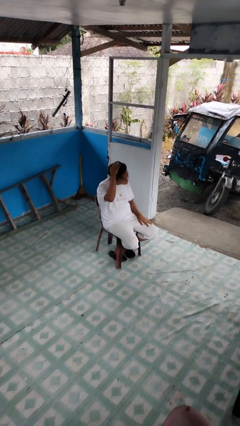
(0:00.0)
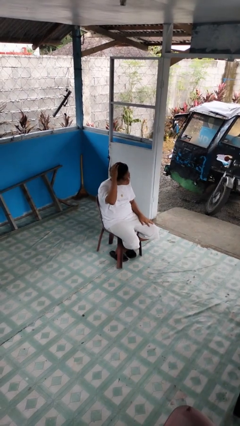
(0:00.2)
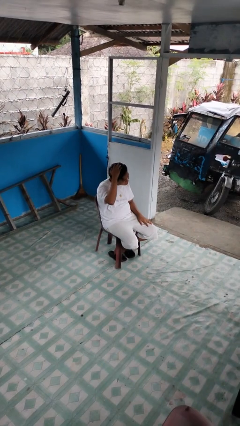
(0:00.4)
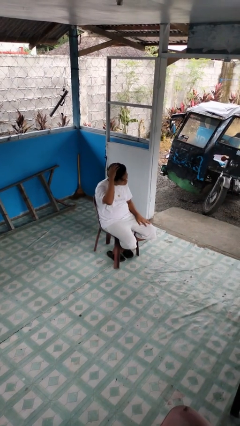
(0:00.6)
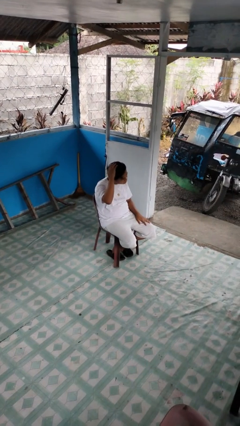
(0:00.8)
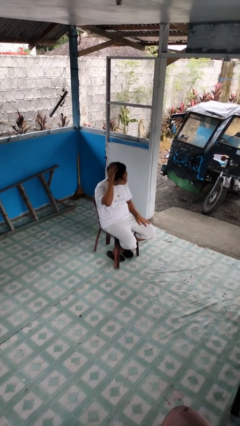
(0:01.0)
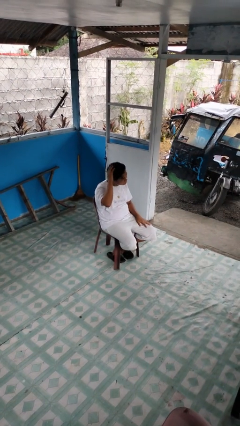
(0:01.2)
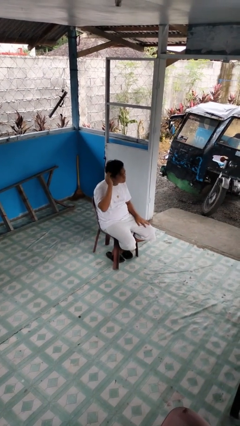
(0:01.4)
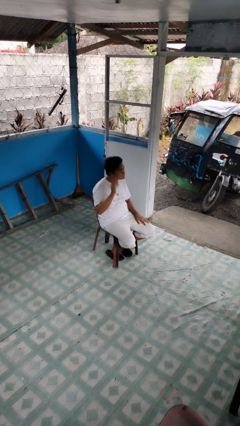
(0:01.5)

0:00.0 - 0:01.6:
person pats head

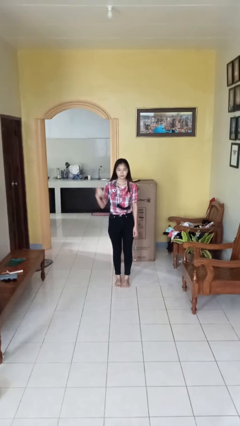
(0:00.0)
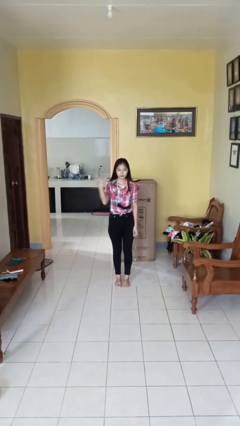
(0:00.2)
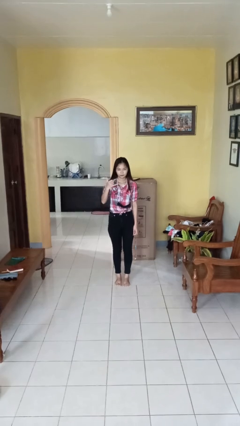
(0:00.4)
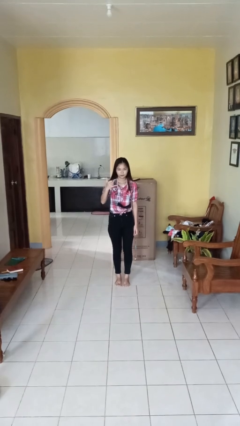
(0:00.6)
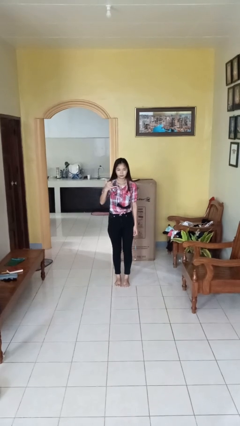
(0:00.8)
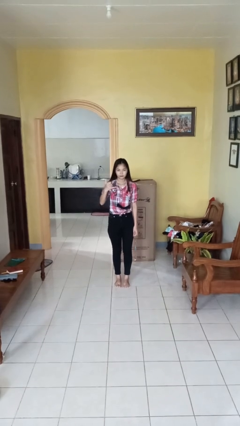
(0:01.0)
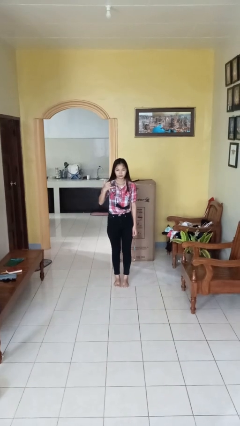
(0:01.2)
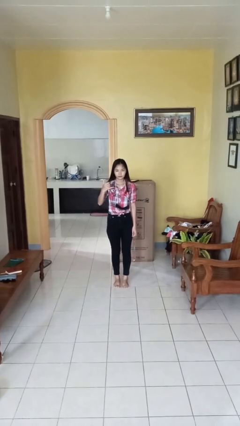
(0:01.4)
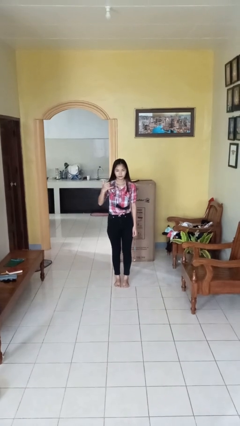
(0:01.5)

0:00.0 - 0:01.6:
person gestures hang loose

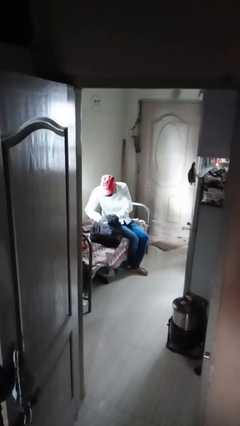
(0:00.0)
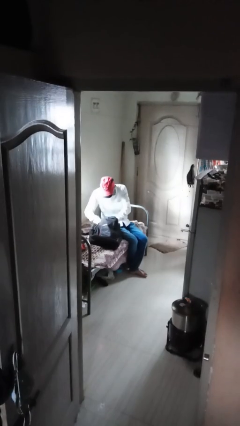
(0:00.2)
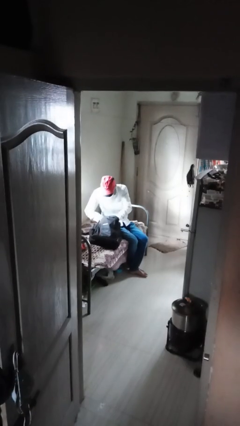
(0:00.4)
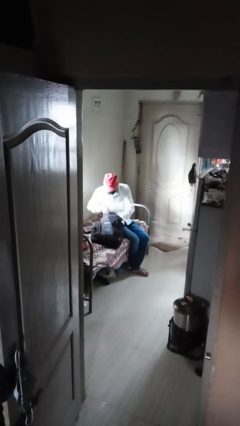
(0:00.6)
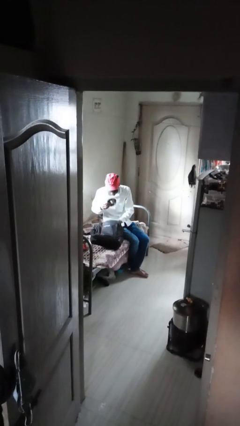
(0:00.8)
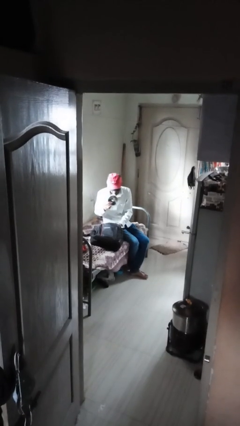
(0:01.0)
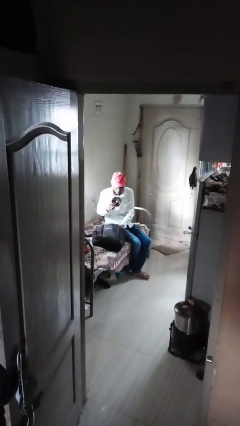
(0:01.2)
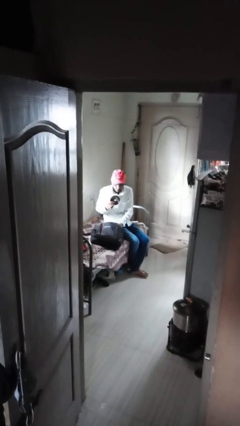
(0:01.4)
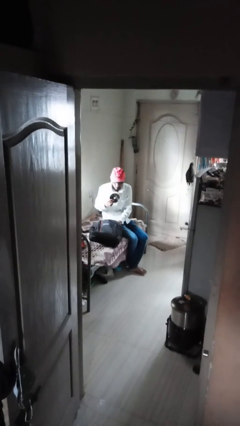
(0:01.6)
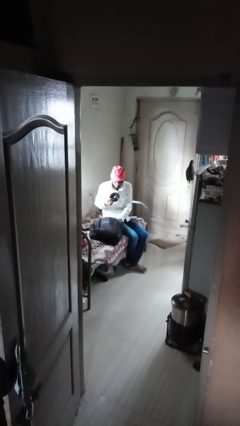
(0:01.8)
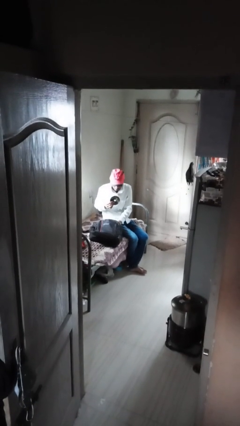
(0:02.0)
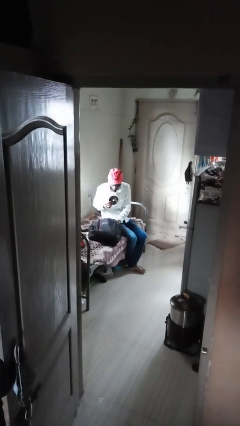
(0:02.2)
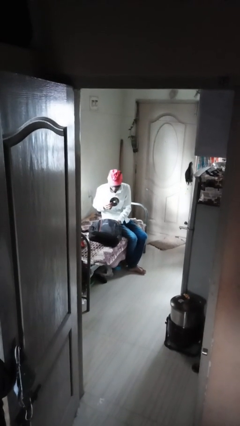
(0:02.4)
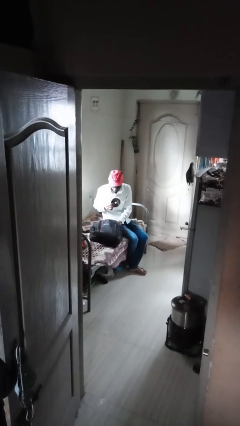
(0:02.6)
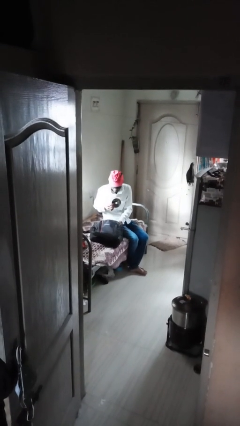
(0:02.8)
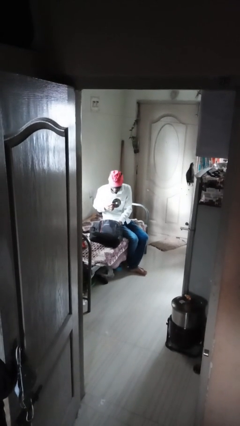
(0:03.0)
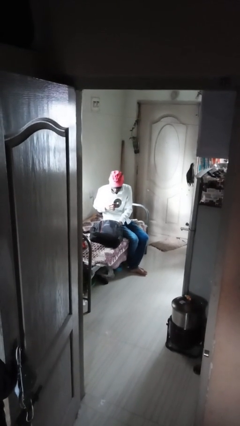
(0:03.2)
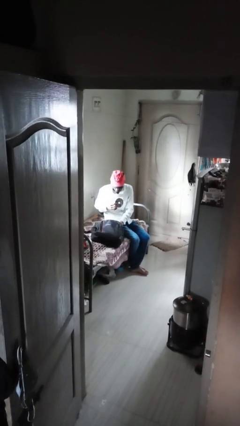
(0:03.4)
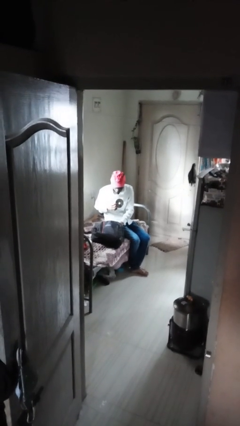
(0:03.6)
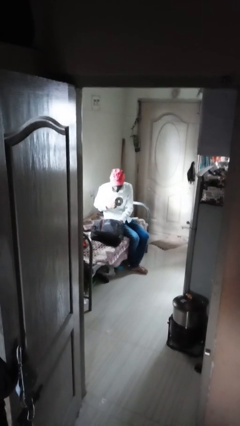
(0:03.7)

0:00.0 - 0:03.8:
person takes object from backpack

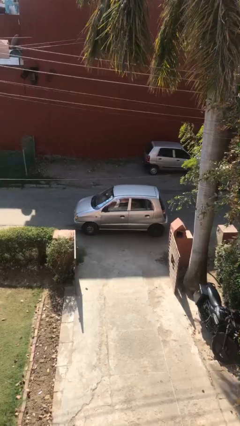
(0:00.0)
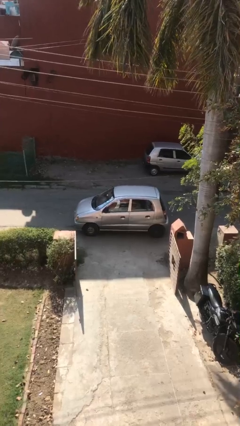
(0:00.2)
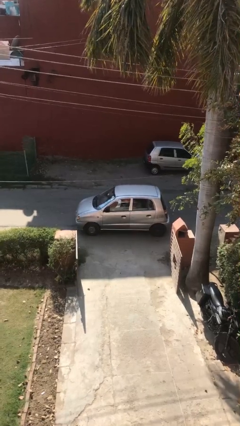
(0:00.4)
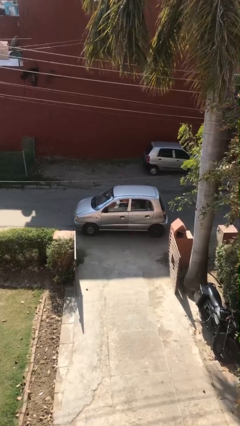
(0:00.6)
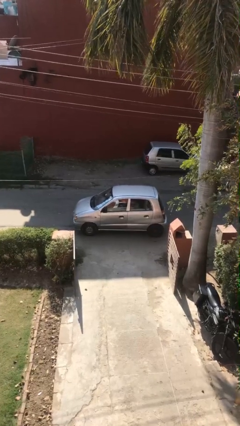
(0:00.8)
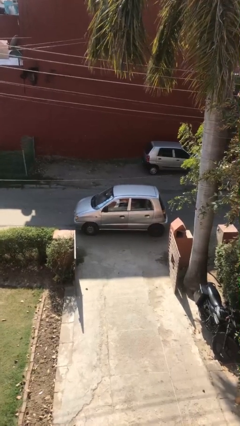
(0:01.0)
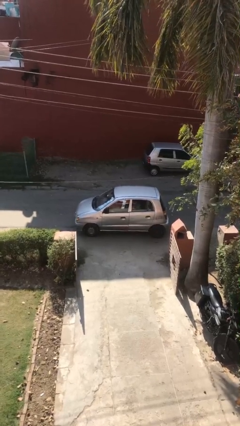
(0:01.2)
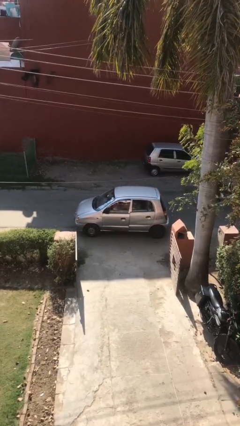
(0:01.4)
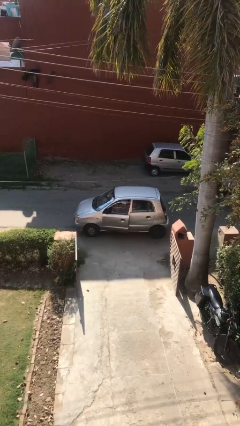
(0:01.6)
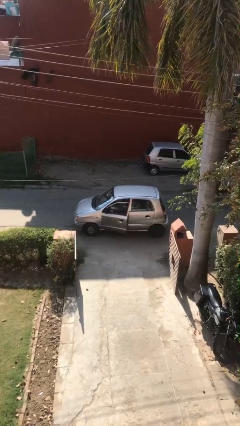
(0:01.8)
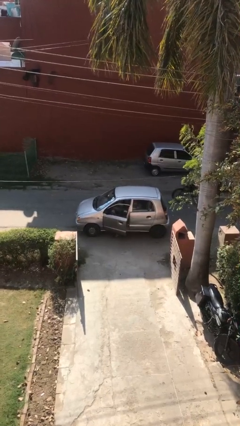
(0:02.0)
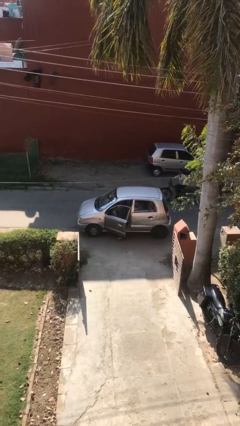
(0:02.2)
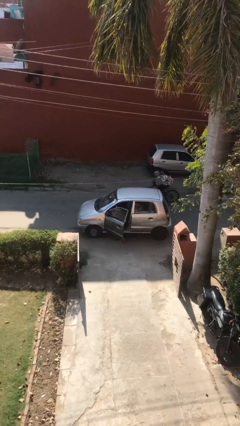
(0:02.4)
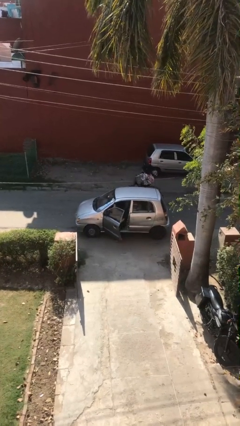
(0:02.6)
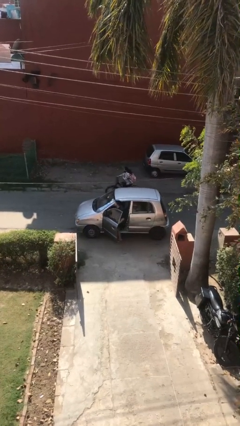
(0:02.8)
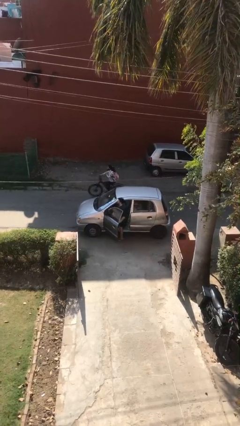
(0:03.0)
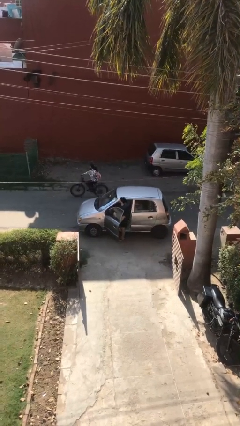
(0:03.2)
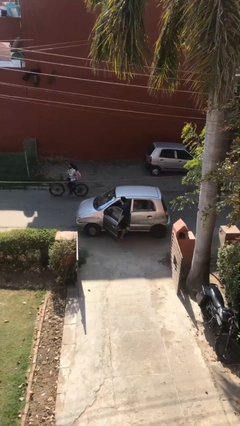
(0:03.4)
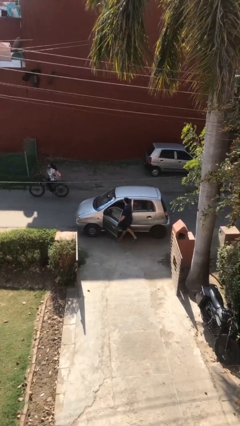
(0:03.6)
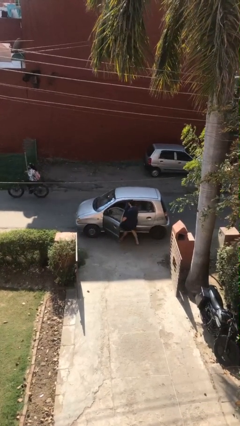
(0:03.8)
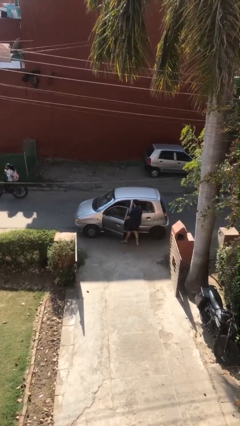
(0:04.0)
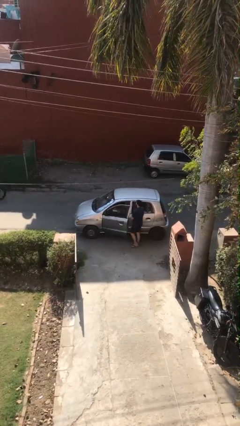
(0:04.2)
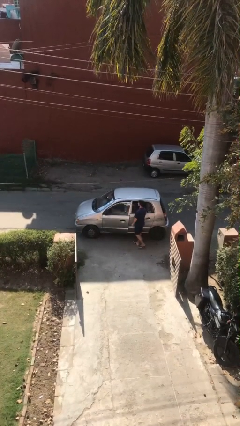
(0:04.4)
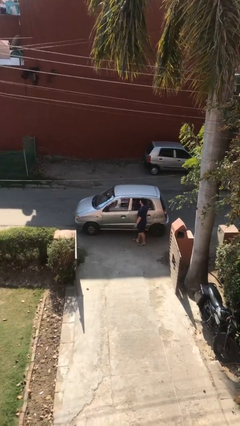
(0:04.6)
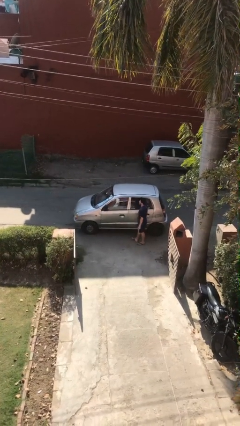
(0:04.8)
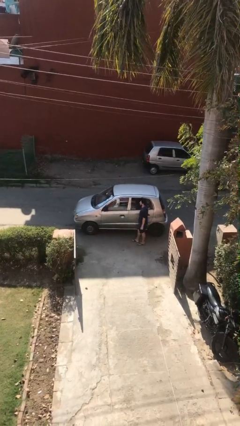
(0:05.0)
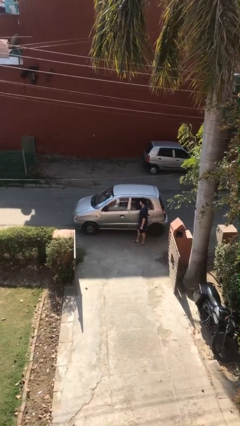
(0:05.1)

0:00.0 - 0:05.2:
car drops off person

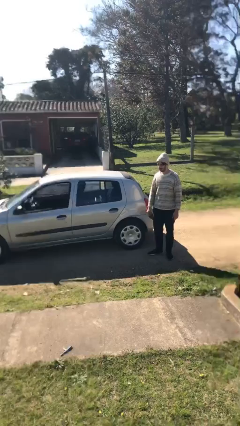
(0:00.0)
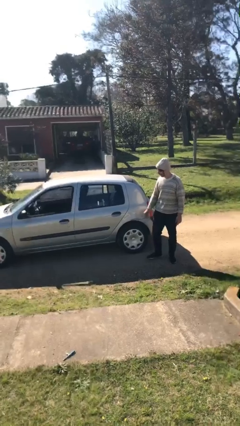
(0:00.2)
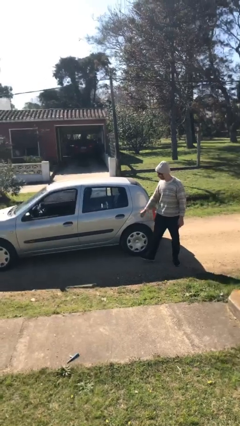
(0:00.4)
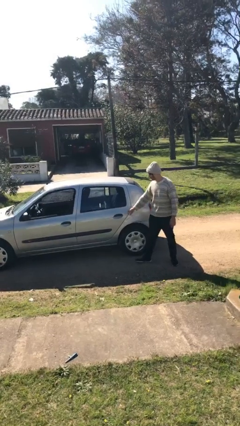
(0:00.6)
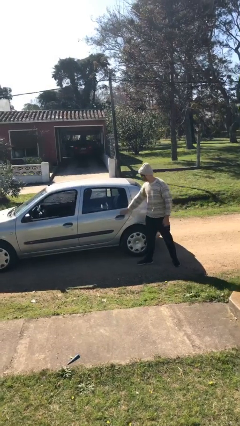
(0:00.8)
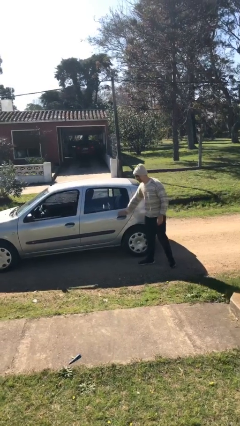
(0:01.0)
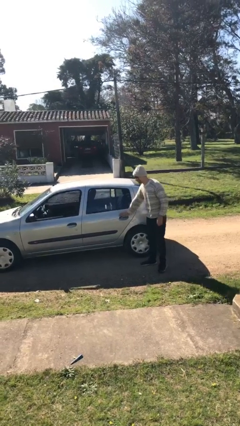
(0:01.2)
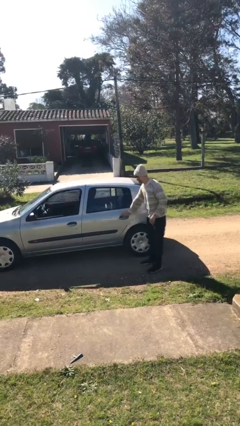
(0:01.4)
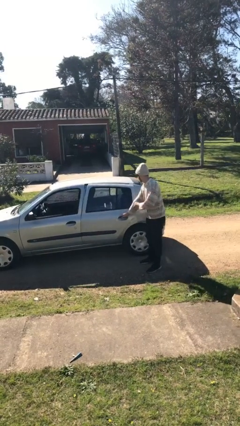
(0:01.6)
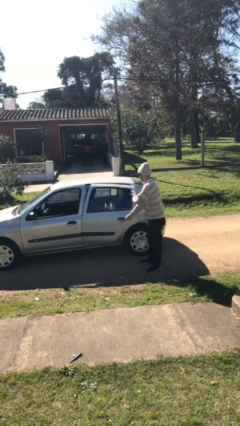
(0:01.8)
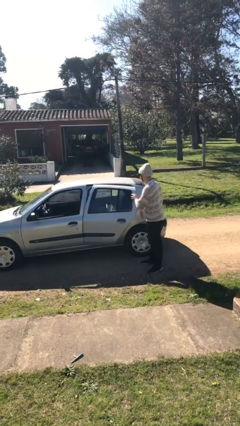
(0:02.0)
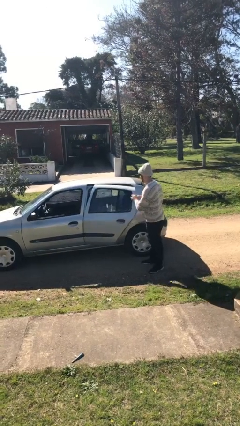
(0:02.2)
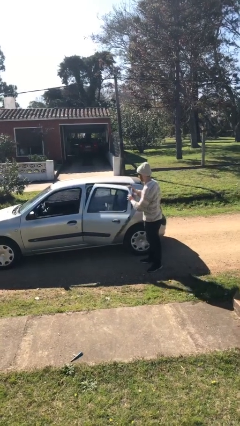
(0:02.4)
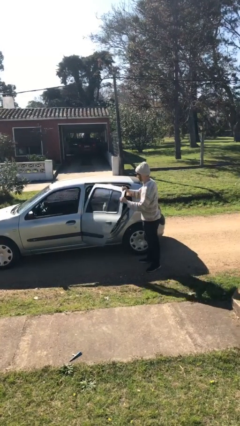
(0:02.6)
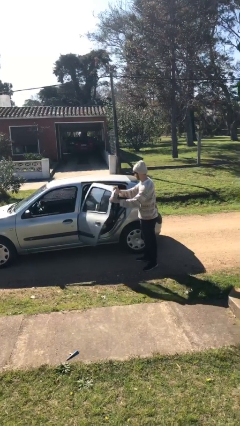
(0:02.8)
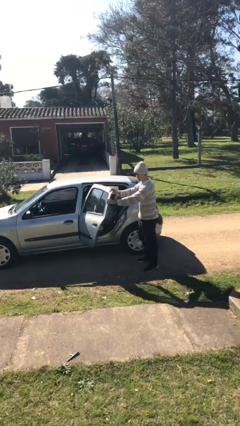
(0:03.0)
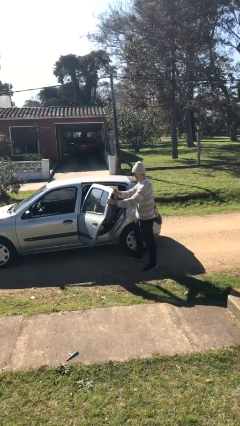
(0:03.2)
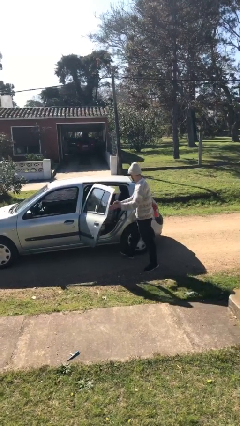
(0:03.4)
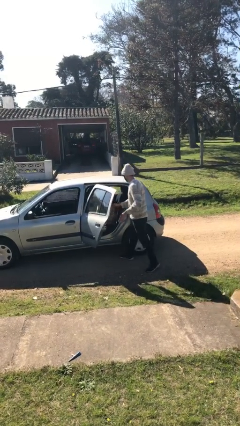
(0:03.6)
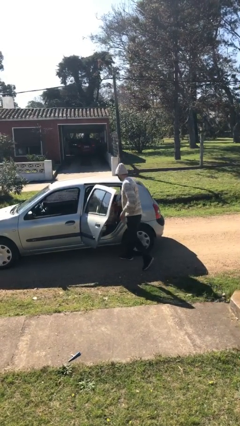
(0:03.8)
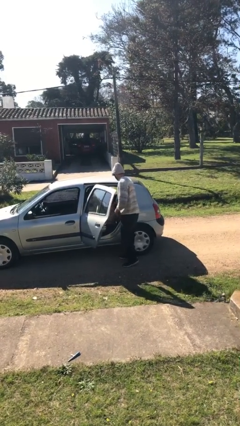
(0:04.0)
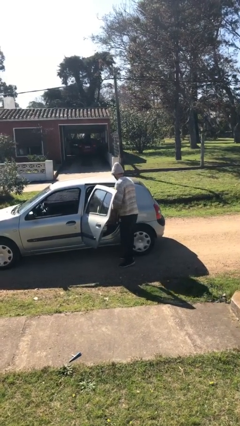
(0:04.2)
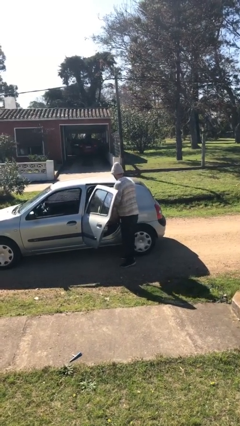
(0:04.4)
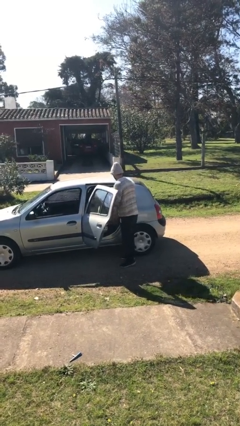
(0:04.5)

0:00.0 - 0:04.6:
person opens car door

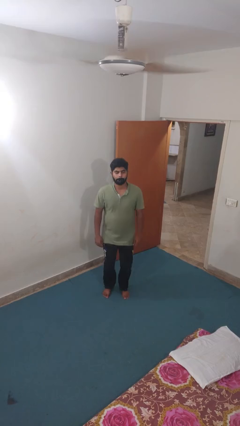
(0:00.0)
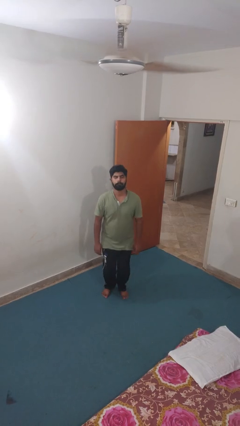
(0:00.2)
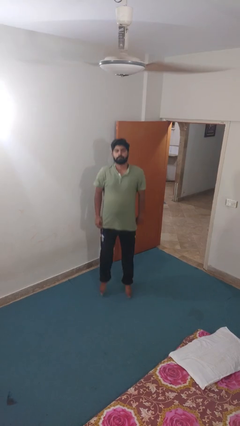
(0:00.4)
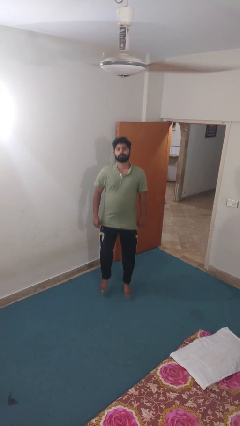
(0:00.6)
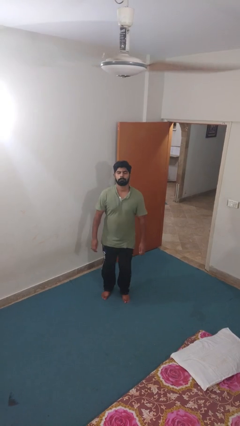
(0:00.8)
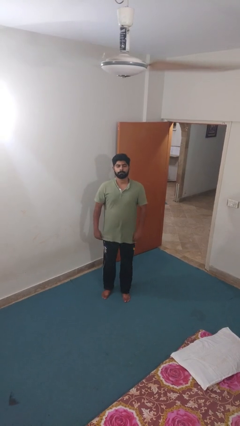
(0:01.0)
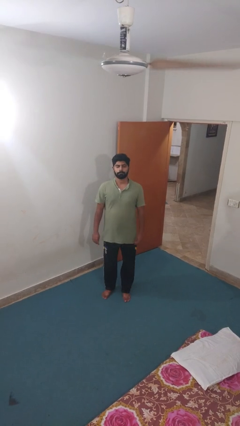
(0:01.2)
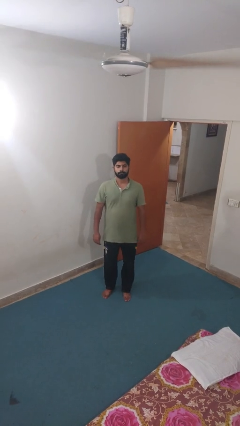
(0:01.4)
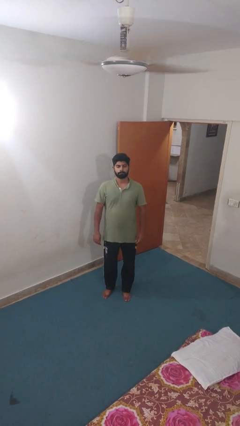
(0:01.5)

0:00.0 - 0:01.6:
person jumps
